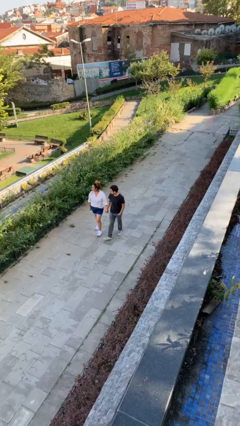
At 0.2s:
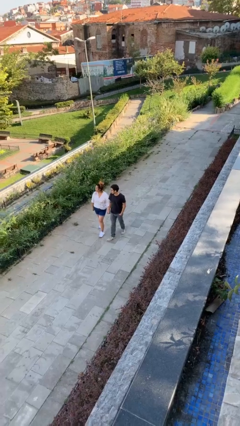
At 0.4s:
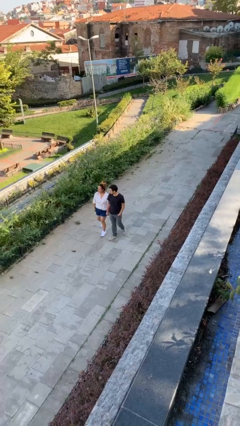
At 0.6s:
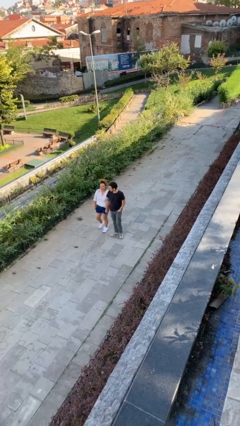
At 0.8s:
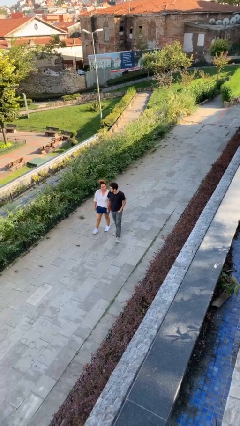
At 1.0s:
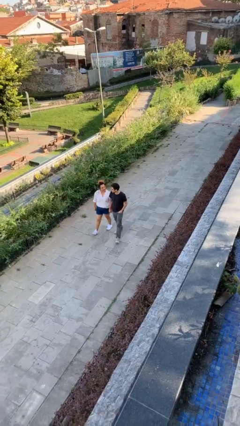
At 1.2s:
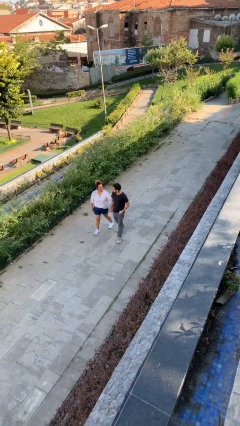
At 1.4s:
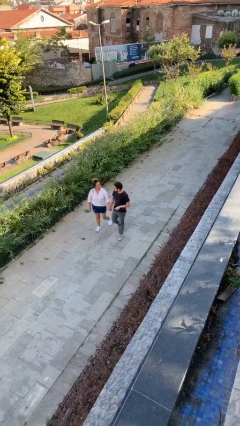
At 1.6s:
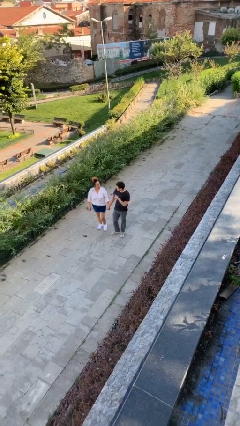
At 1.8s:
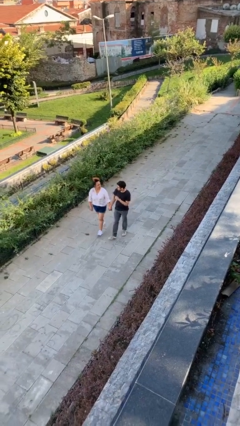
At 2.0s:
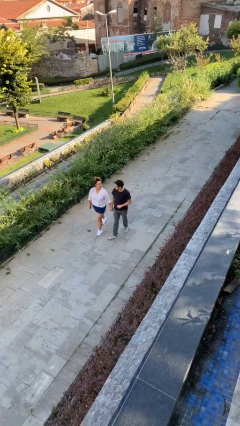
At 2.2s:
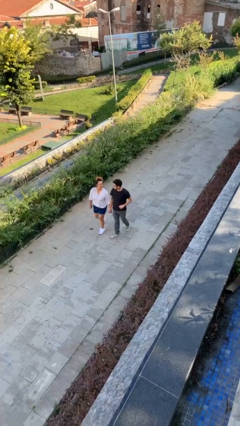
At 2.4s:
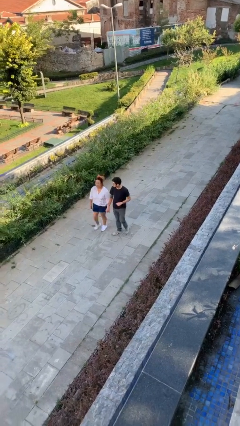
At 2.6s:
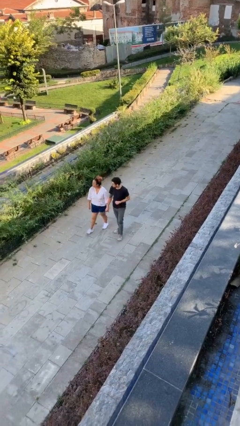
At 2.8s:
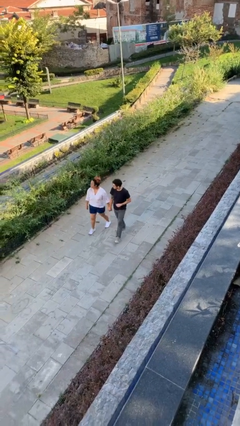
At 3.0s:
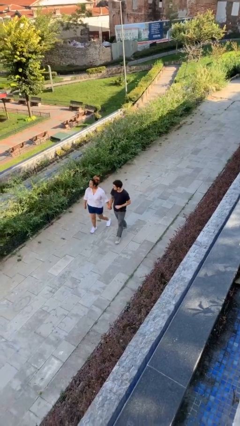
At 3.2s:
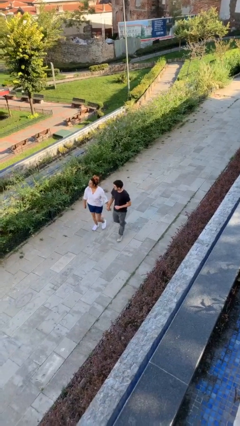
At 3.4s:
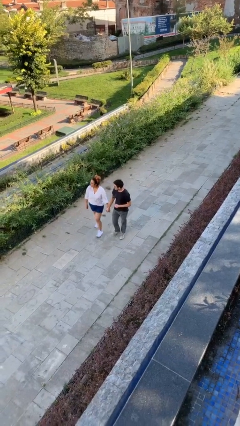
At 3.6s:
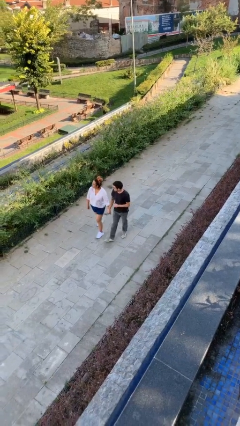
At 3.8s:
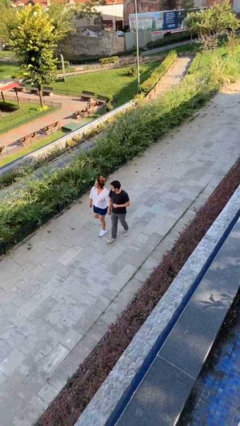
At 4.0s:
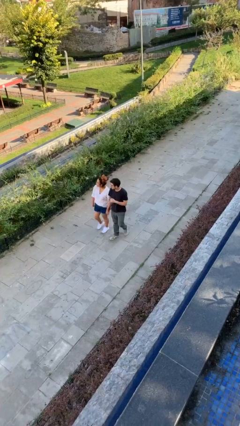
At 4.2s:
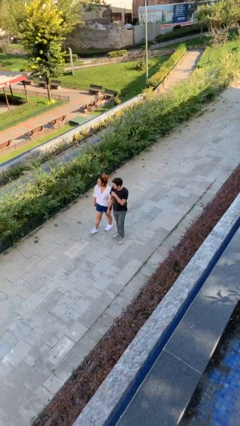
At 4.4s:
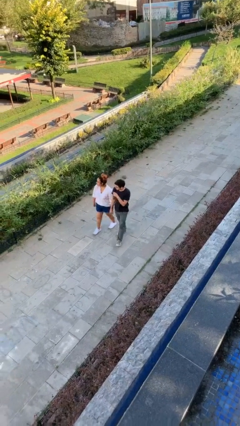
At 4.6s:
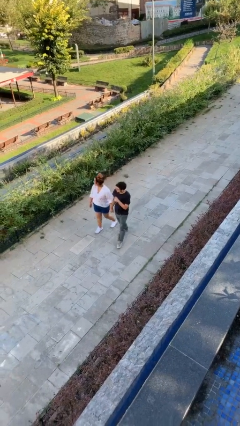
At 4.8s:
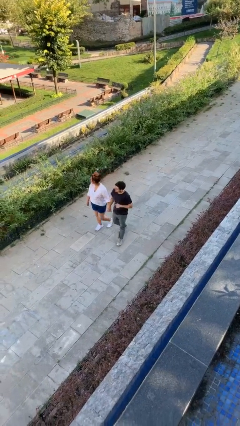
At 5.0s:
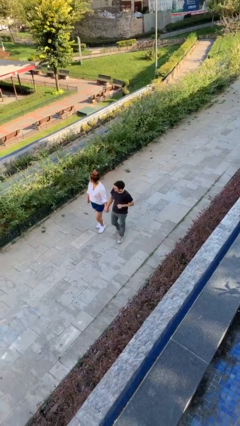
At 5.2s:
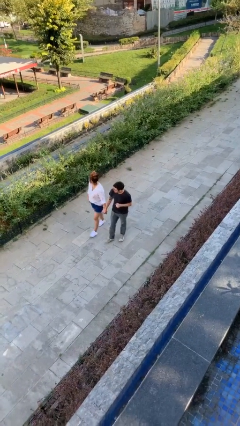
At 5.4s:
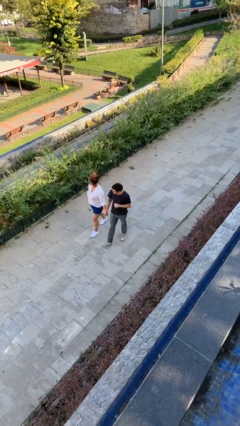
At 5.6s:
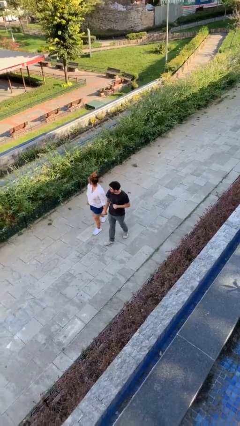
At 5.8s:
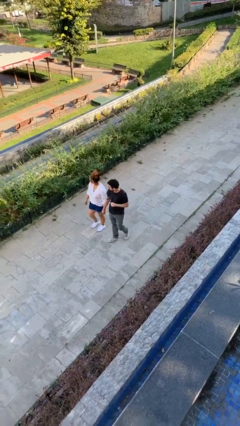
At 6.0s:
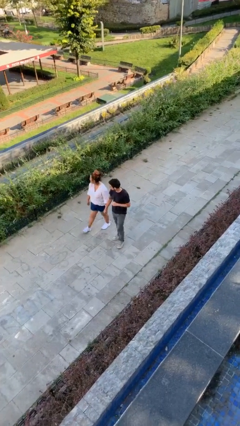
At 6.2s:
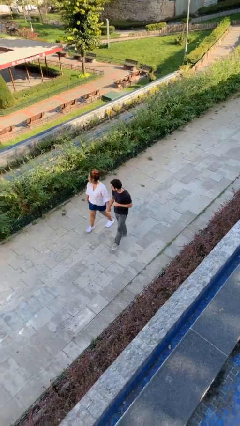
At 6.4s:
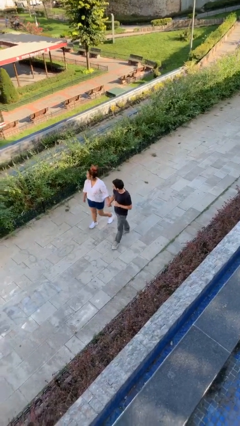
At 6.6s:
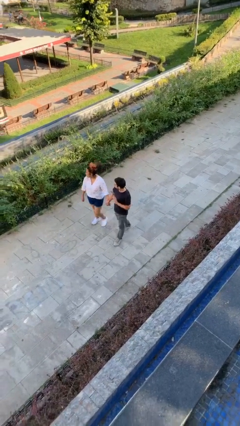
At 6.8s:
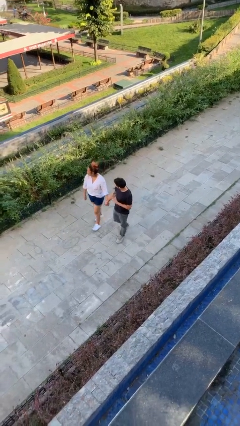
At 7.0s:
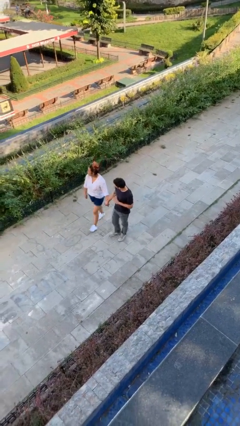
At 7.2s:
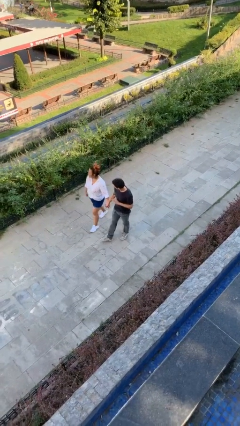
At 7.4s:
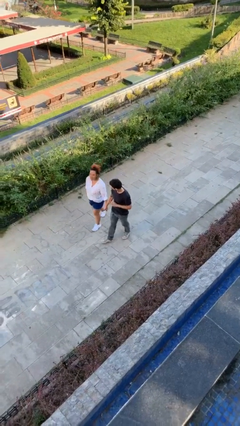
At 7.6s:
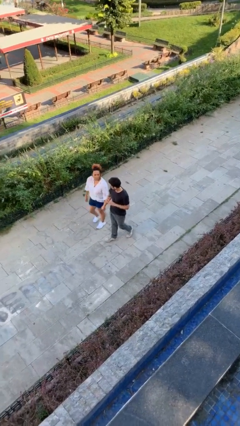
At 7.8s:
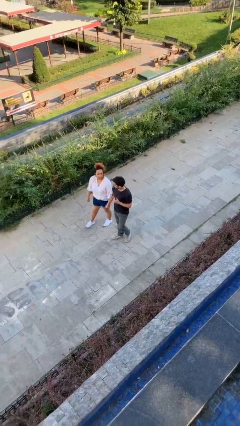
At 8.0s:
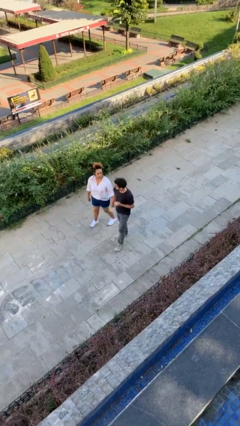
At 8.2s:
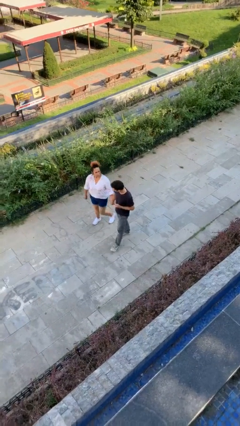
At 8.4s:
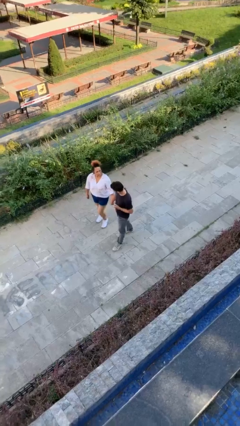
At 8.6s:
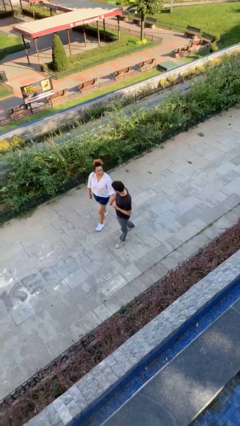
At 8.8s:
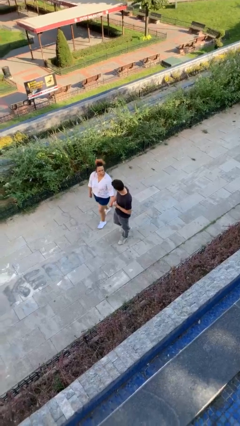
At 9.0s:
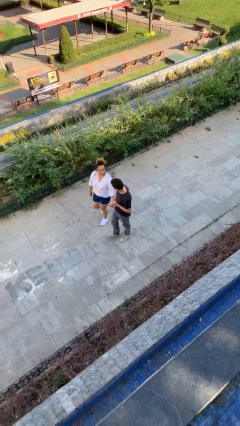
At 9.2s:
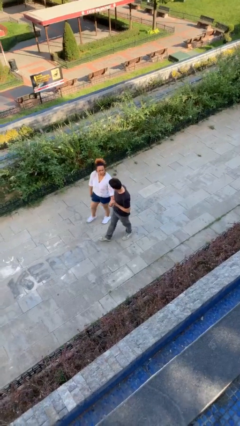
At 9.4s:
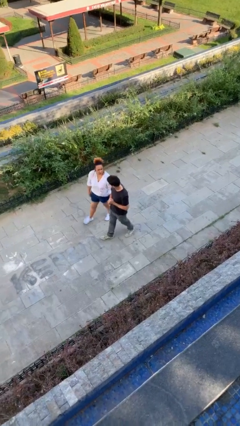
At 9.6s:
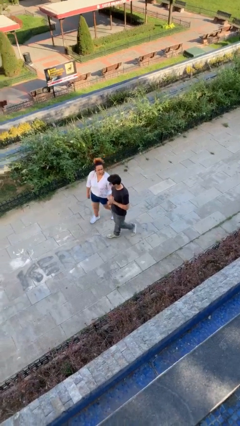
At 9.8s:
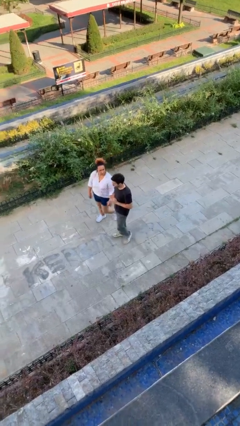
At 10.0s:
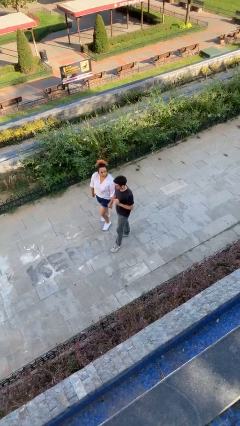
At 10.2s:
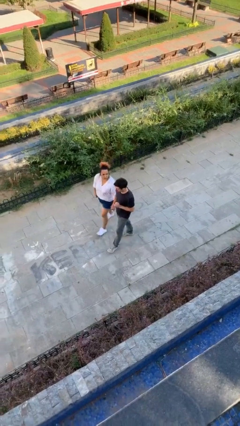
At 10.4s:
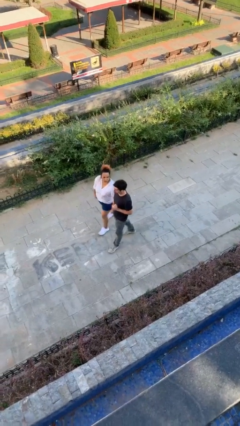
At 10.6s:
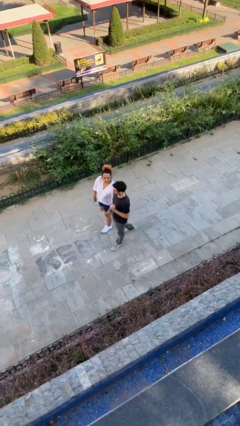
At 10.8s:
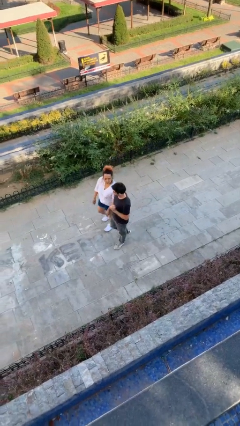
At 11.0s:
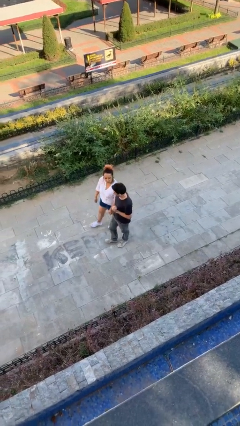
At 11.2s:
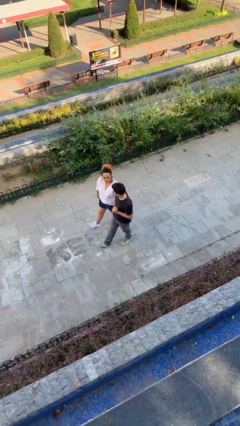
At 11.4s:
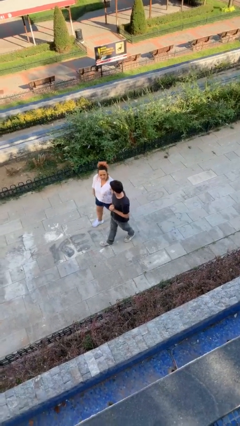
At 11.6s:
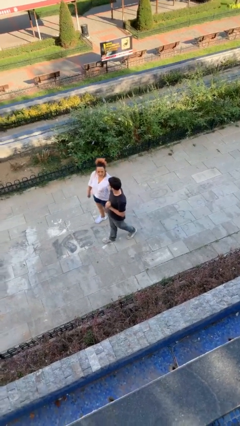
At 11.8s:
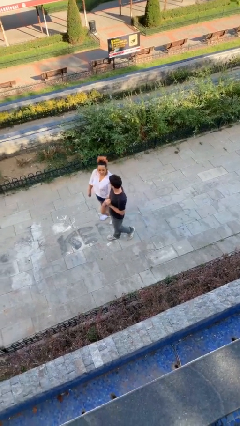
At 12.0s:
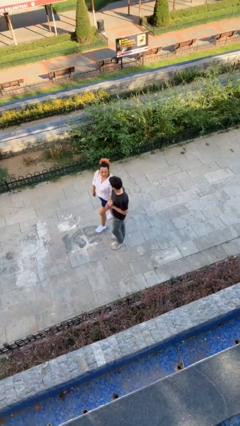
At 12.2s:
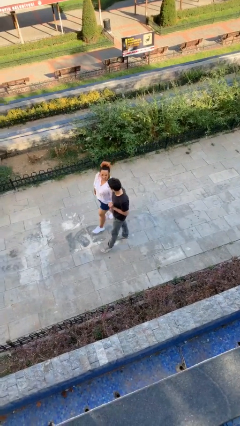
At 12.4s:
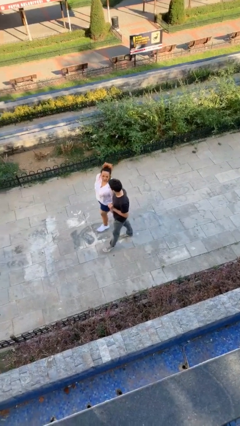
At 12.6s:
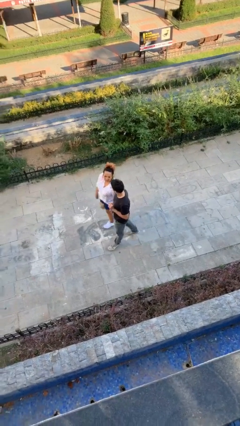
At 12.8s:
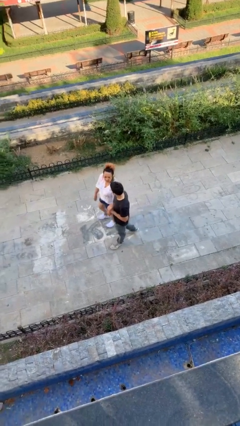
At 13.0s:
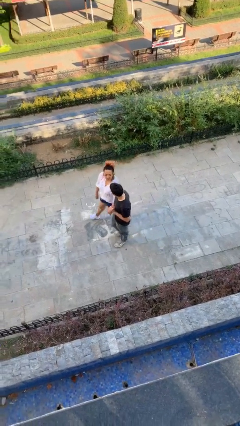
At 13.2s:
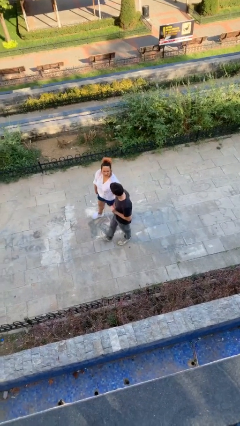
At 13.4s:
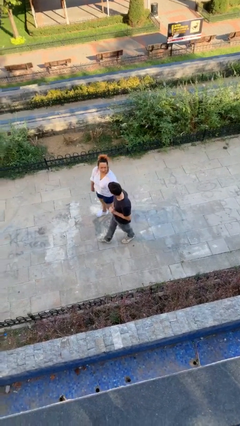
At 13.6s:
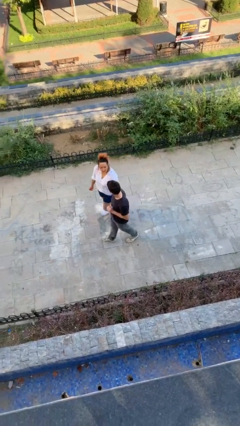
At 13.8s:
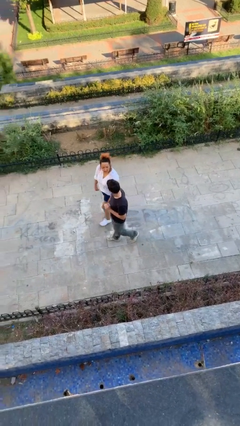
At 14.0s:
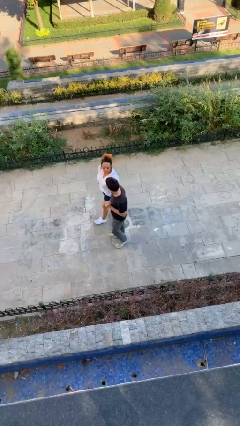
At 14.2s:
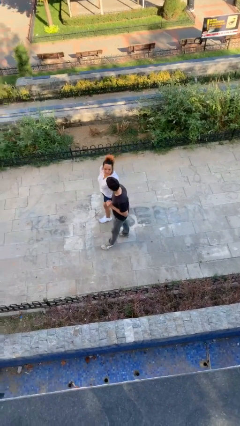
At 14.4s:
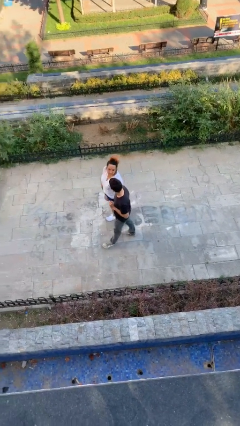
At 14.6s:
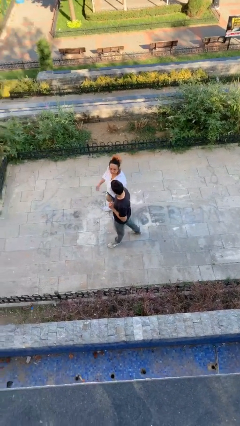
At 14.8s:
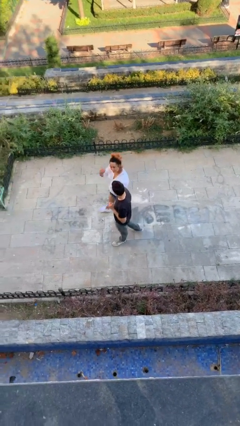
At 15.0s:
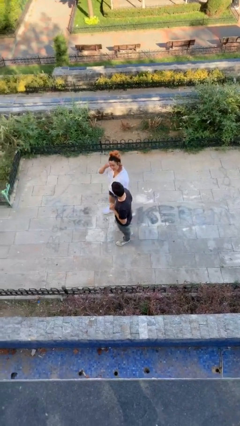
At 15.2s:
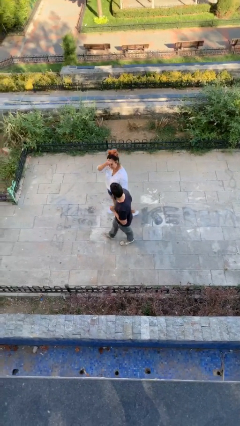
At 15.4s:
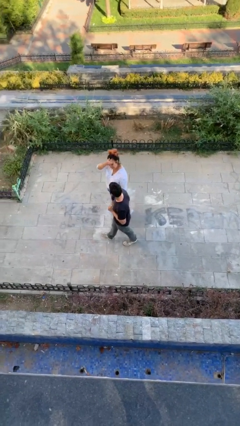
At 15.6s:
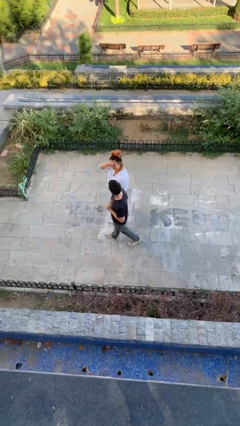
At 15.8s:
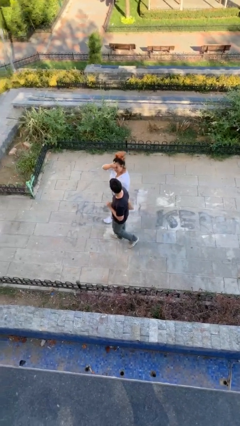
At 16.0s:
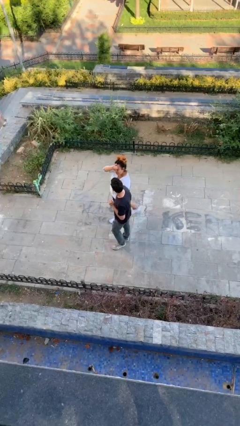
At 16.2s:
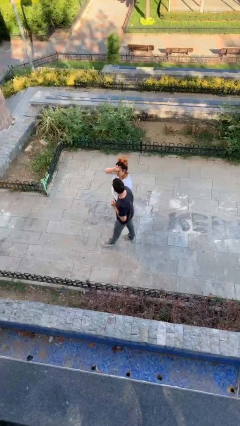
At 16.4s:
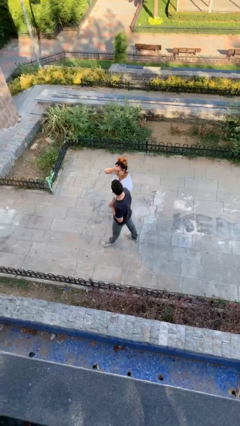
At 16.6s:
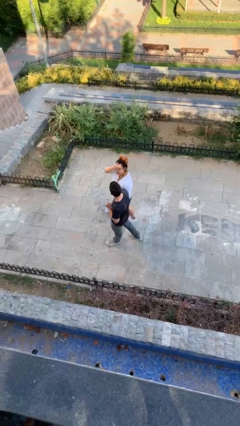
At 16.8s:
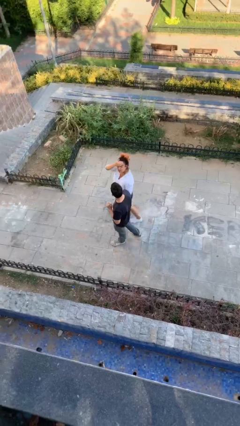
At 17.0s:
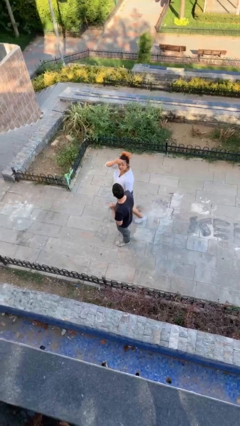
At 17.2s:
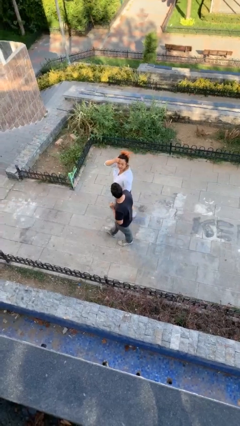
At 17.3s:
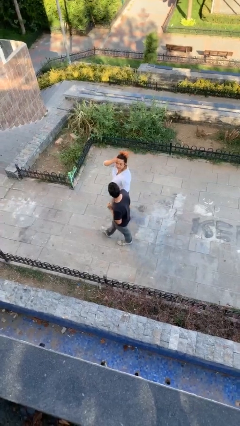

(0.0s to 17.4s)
person holds hand

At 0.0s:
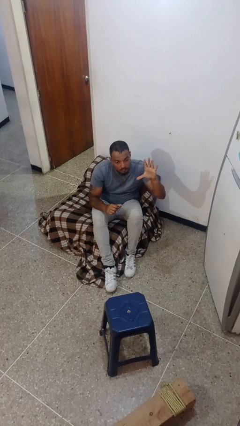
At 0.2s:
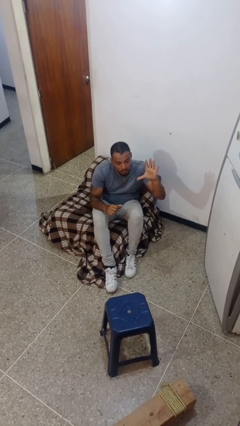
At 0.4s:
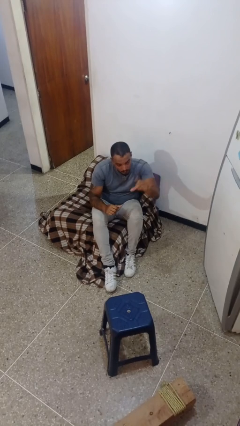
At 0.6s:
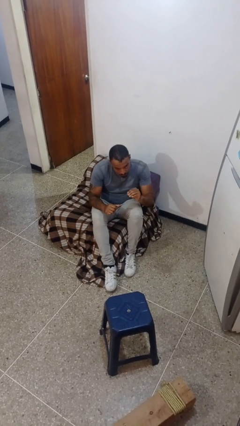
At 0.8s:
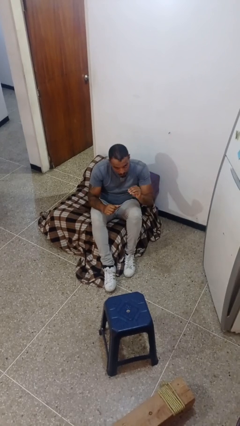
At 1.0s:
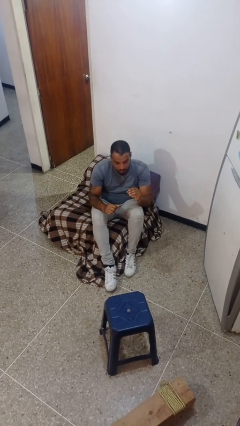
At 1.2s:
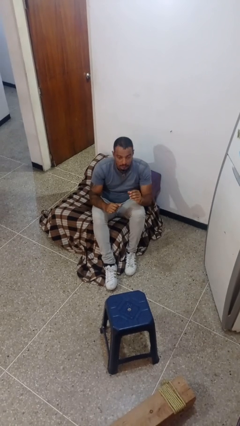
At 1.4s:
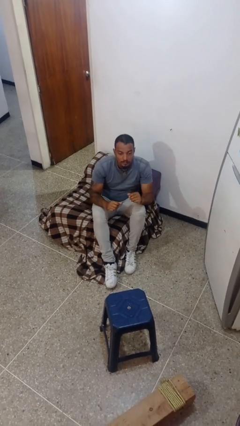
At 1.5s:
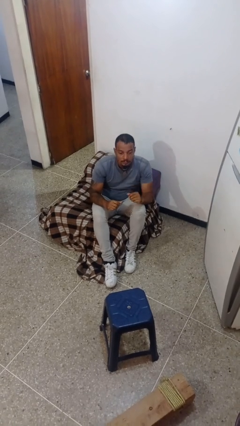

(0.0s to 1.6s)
person gestures zoom out
